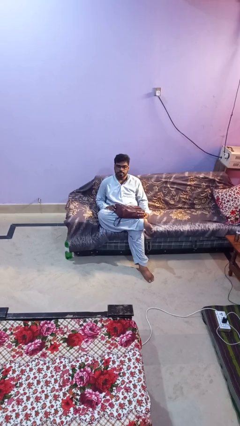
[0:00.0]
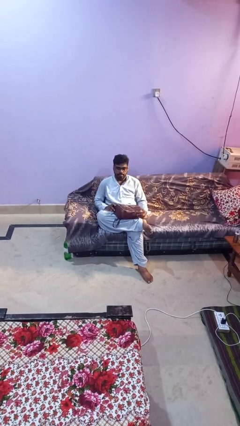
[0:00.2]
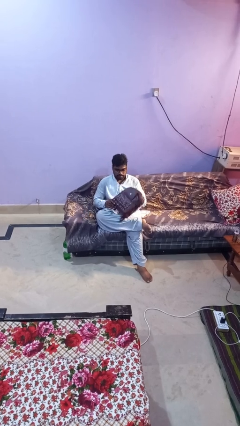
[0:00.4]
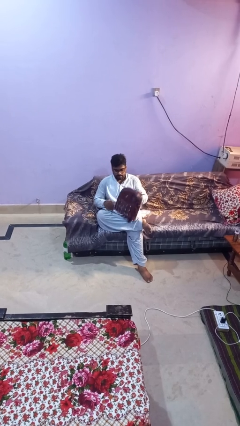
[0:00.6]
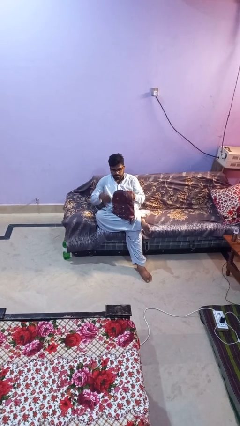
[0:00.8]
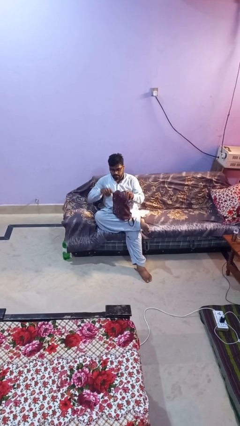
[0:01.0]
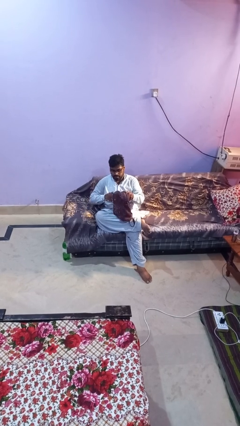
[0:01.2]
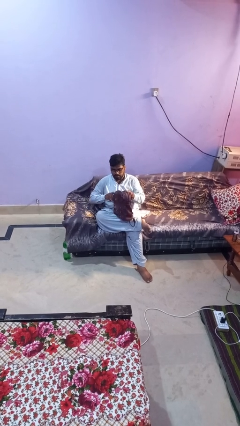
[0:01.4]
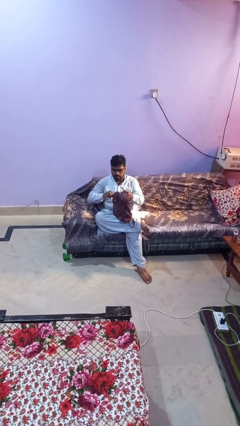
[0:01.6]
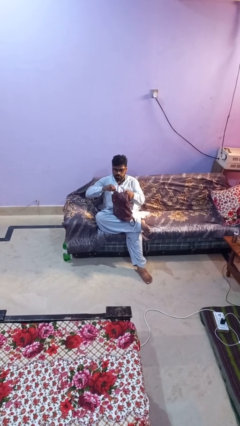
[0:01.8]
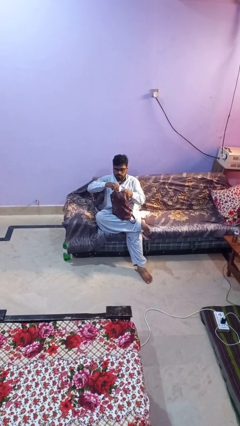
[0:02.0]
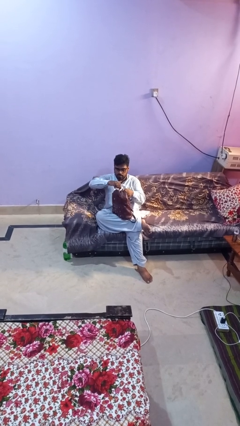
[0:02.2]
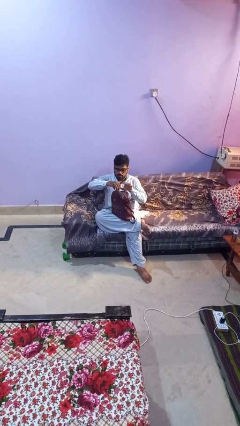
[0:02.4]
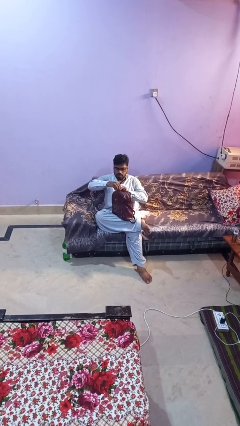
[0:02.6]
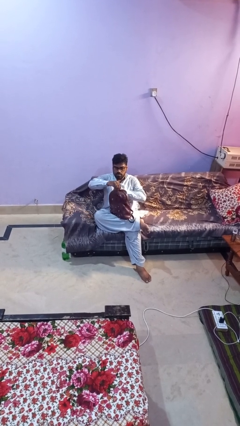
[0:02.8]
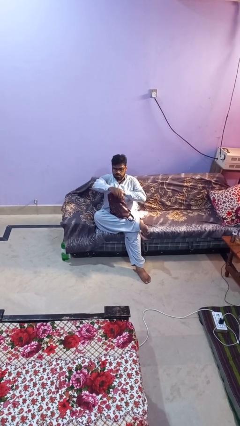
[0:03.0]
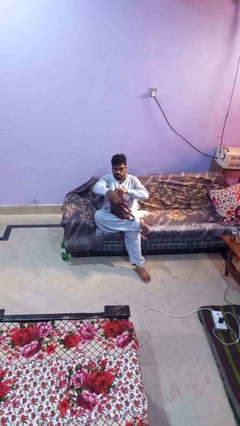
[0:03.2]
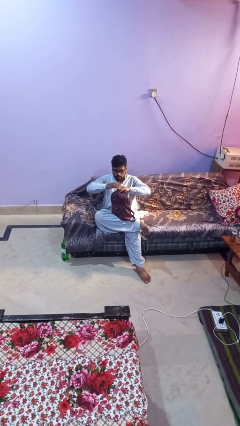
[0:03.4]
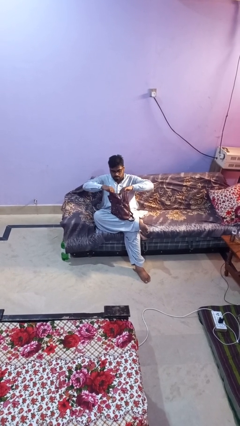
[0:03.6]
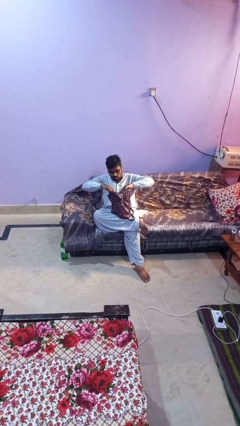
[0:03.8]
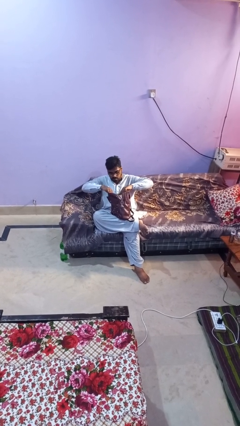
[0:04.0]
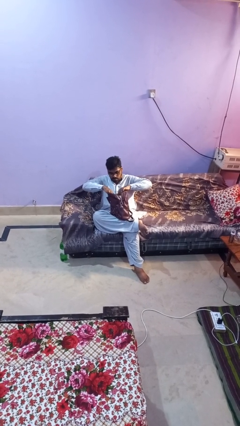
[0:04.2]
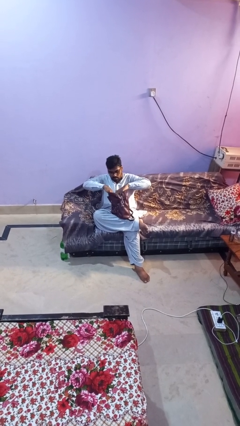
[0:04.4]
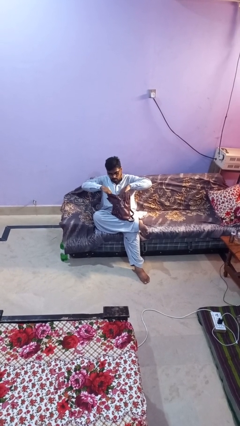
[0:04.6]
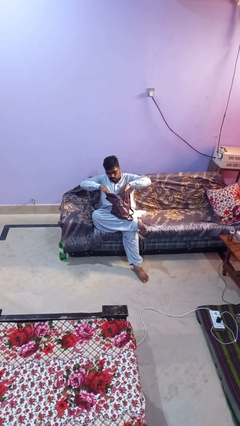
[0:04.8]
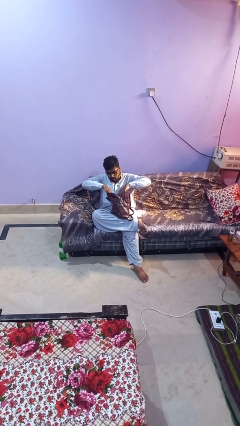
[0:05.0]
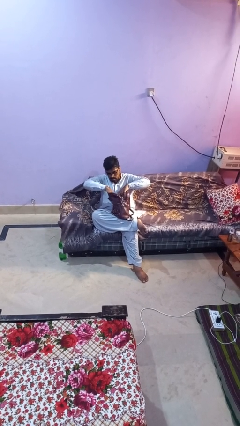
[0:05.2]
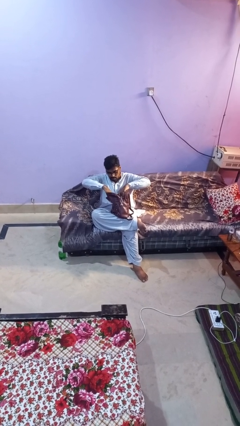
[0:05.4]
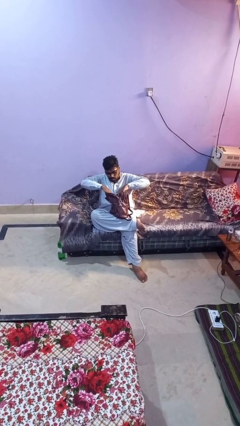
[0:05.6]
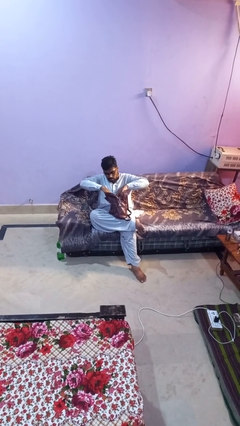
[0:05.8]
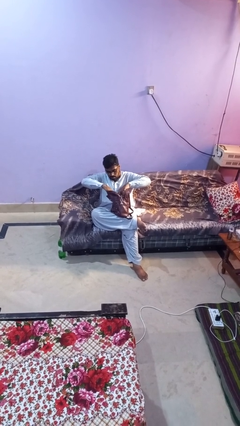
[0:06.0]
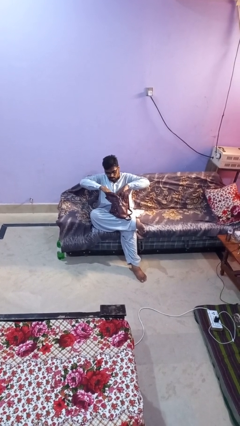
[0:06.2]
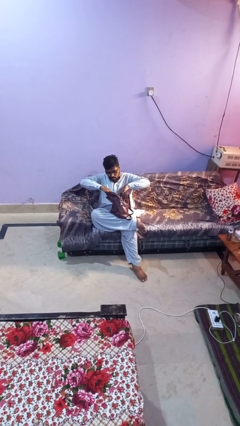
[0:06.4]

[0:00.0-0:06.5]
person searches in backpack

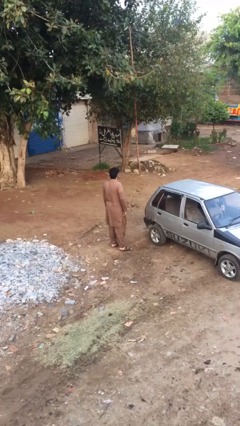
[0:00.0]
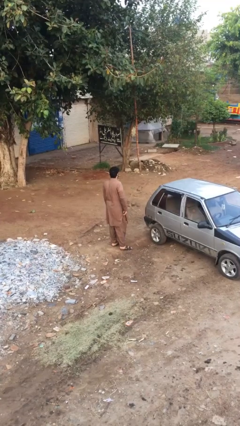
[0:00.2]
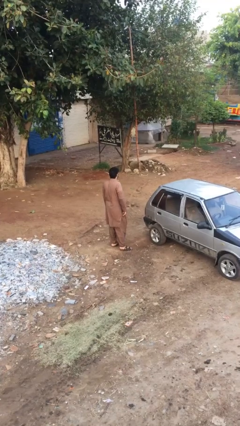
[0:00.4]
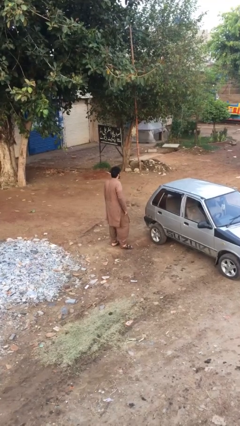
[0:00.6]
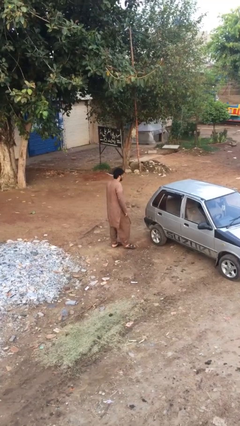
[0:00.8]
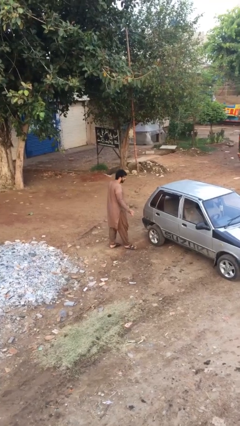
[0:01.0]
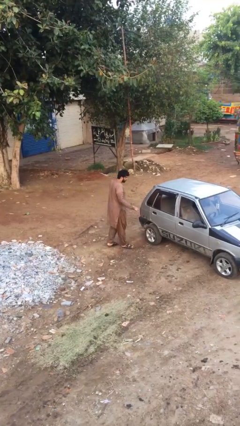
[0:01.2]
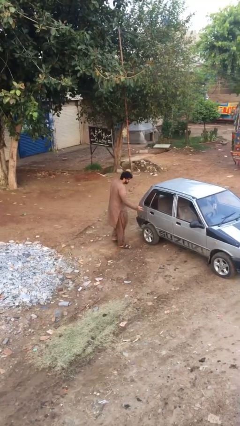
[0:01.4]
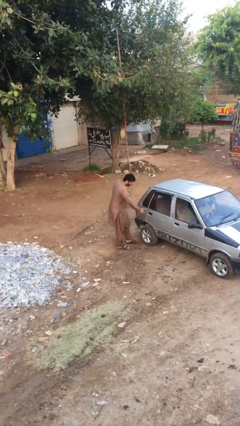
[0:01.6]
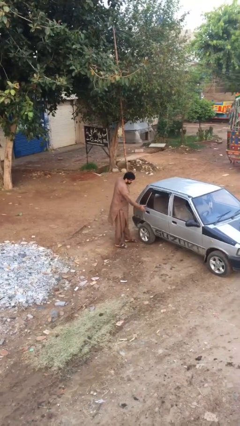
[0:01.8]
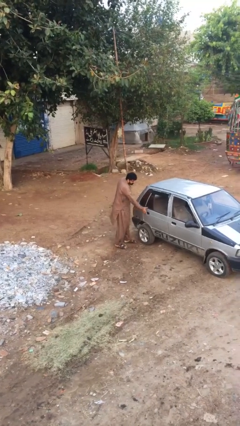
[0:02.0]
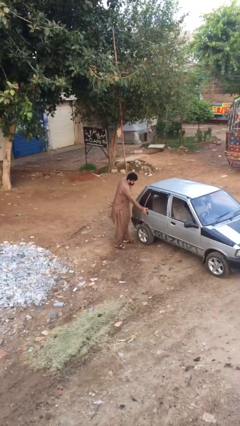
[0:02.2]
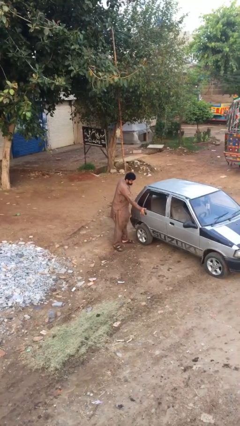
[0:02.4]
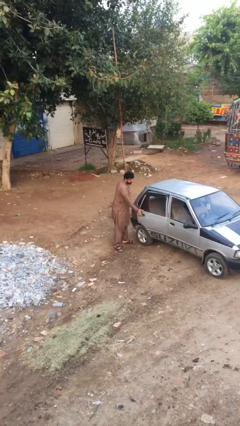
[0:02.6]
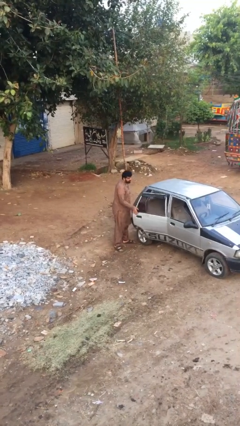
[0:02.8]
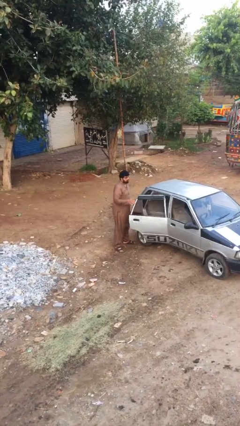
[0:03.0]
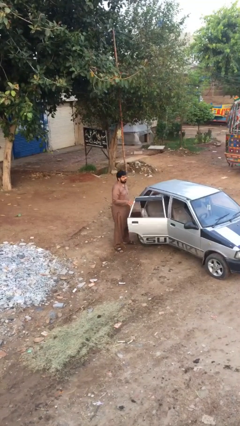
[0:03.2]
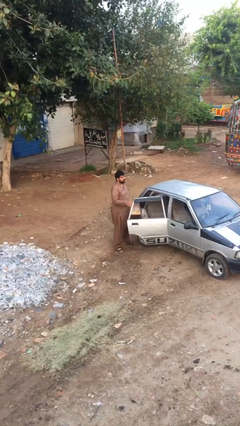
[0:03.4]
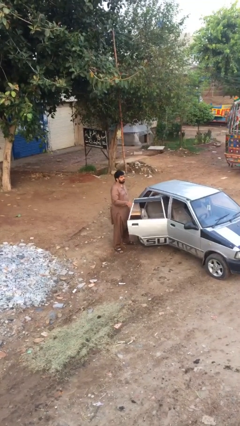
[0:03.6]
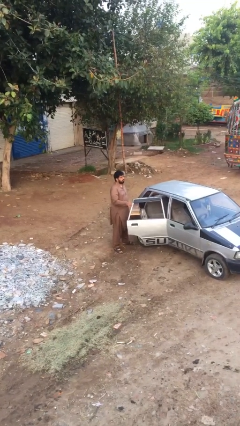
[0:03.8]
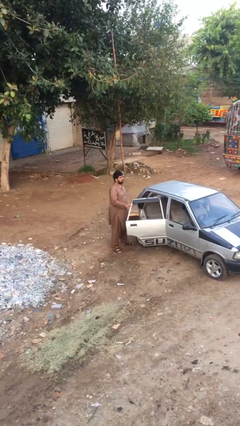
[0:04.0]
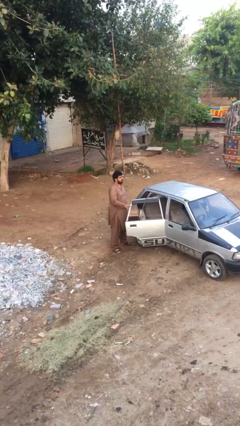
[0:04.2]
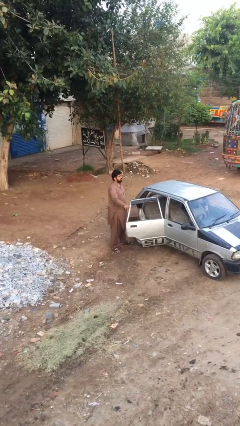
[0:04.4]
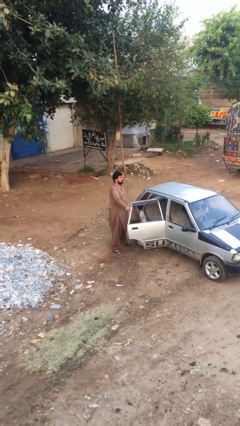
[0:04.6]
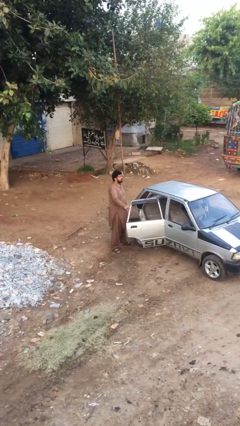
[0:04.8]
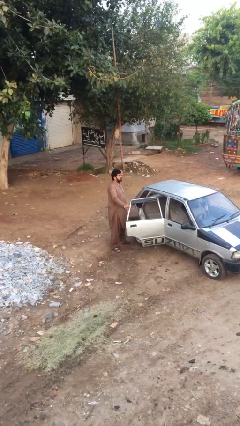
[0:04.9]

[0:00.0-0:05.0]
person opens car door

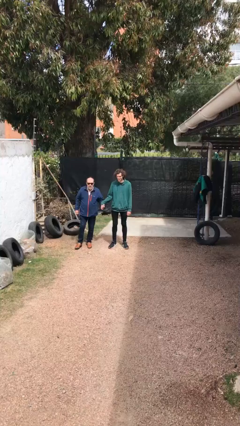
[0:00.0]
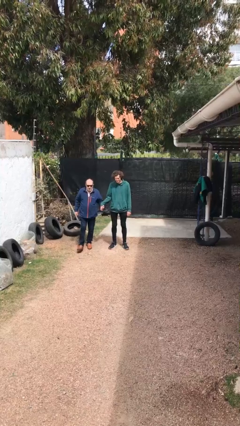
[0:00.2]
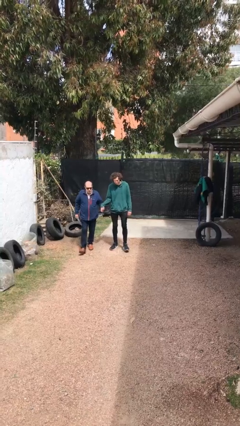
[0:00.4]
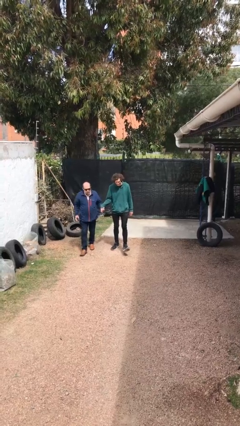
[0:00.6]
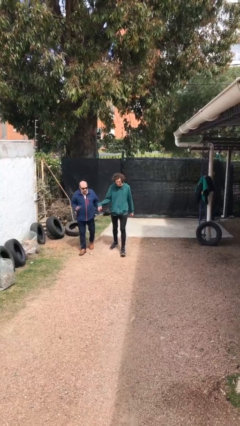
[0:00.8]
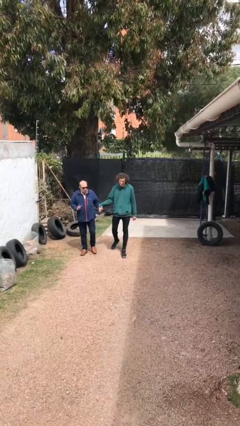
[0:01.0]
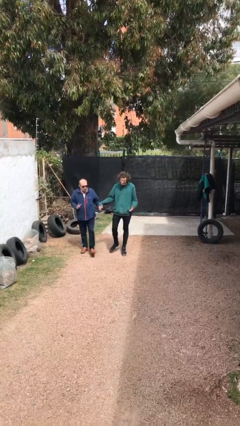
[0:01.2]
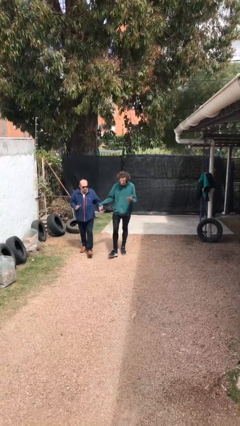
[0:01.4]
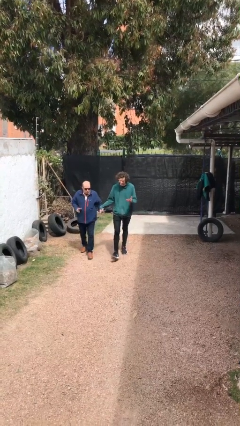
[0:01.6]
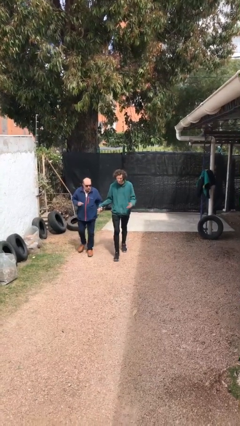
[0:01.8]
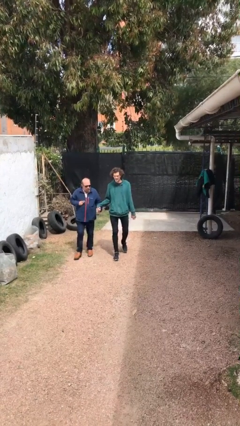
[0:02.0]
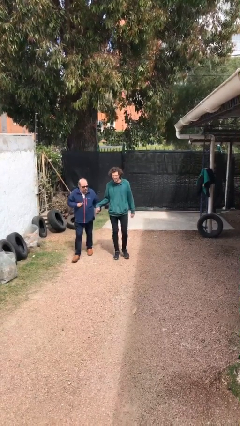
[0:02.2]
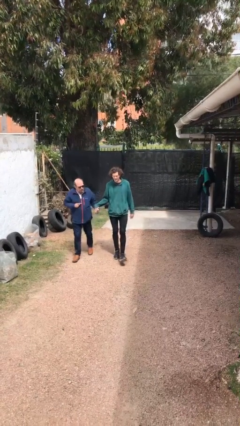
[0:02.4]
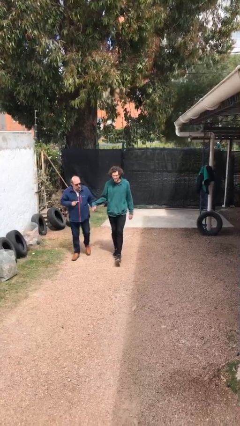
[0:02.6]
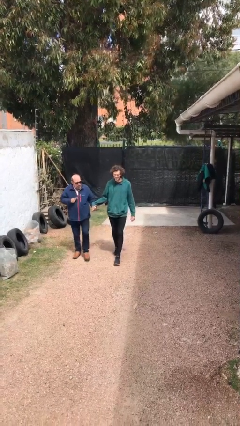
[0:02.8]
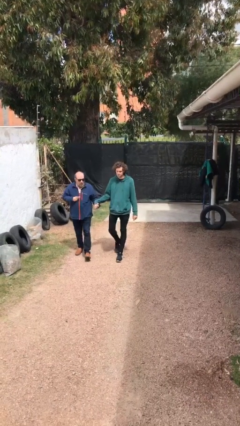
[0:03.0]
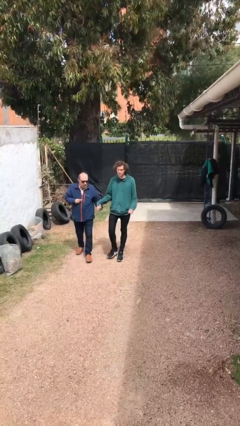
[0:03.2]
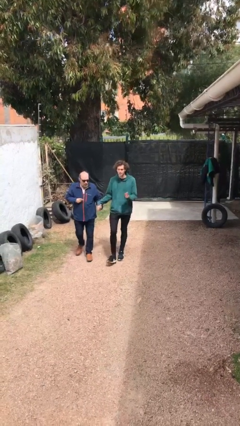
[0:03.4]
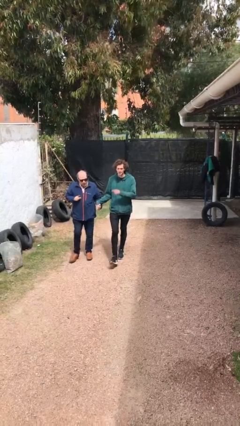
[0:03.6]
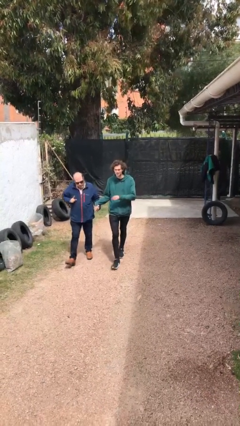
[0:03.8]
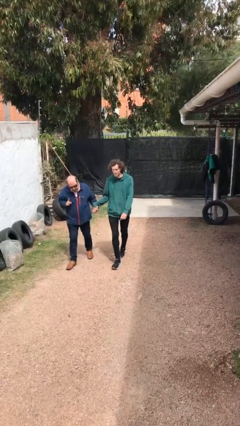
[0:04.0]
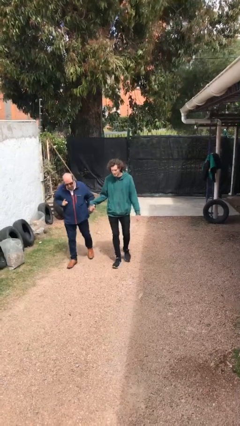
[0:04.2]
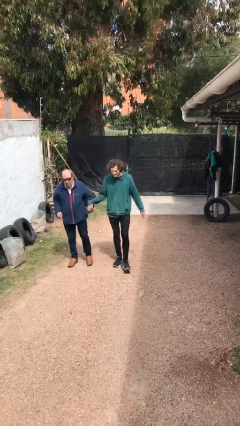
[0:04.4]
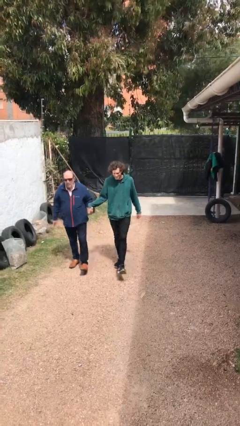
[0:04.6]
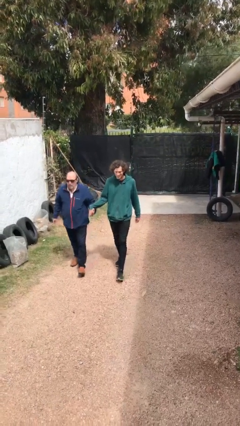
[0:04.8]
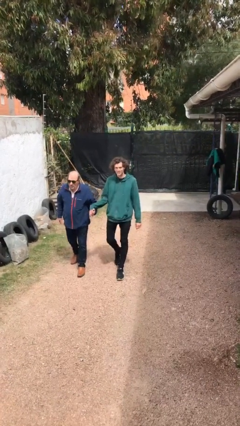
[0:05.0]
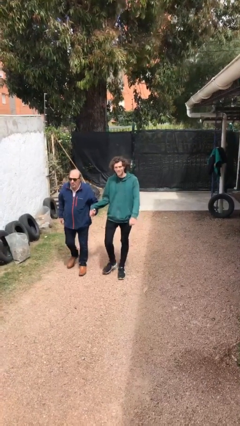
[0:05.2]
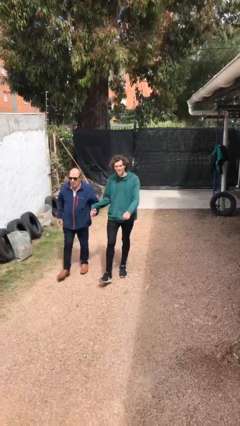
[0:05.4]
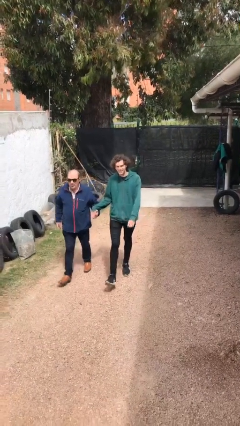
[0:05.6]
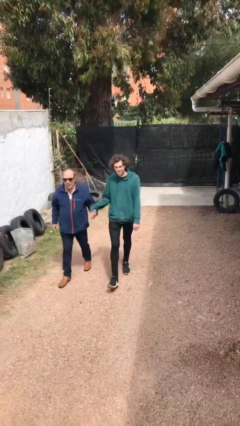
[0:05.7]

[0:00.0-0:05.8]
person holds hand

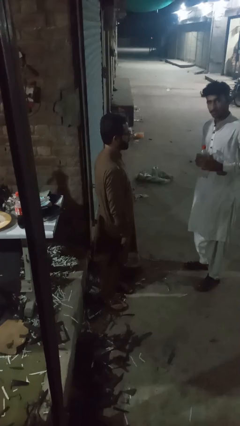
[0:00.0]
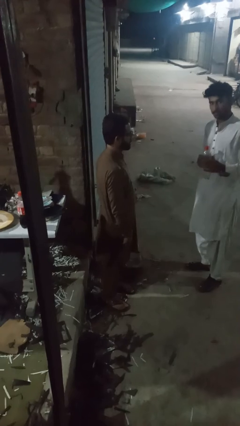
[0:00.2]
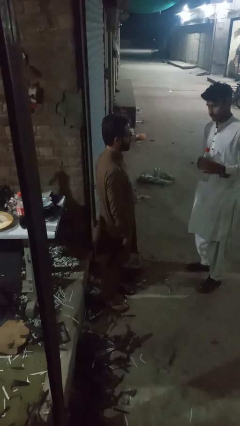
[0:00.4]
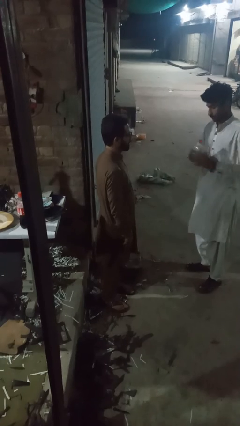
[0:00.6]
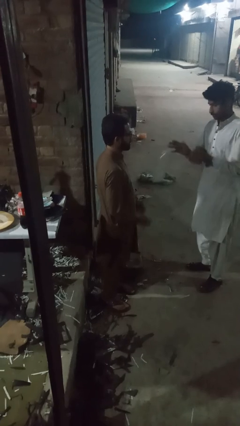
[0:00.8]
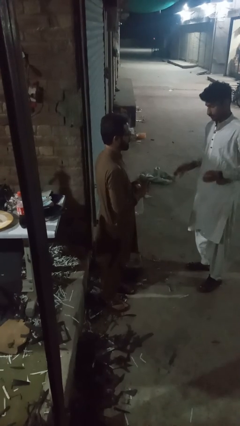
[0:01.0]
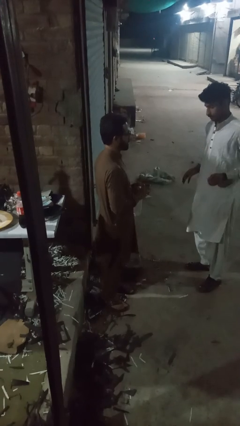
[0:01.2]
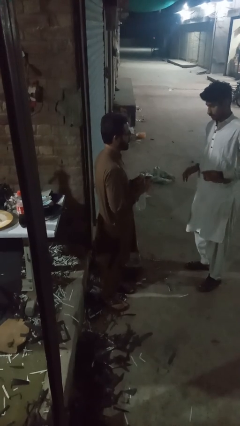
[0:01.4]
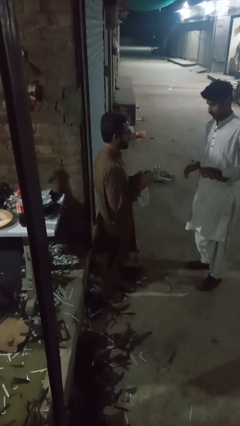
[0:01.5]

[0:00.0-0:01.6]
person catches object from person
